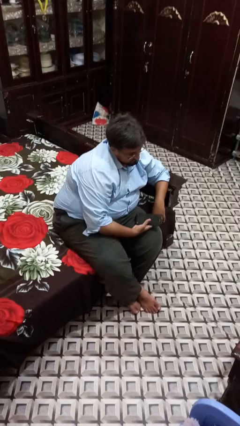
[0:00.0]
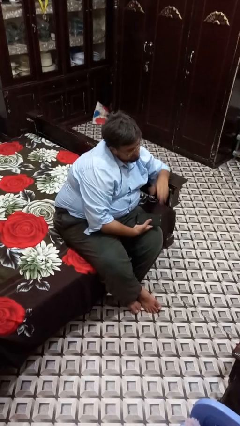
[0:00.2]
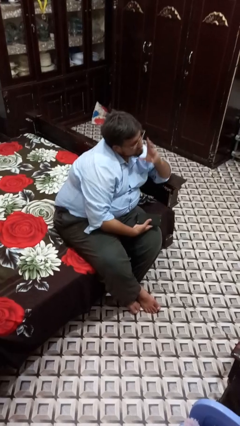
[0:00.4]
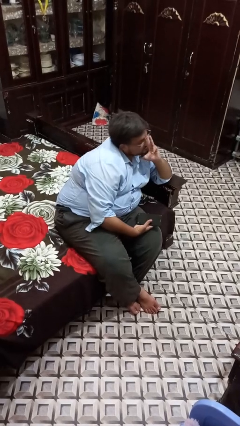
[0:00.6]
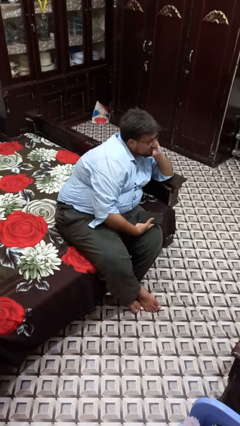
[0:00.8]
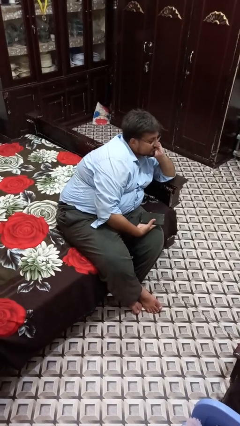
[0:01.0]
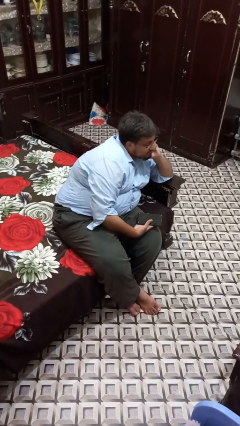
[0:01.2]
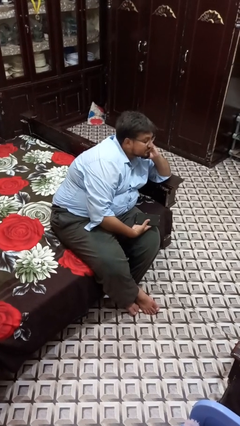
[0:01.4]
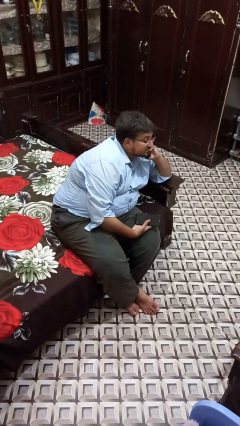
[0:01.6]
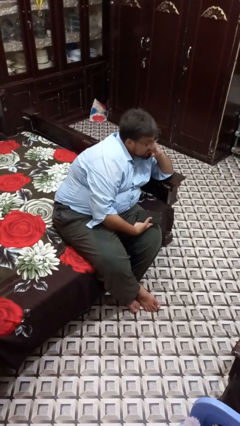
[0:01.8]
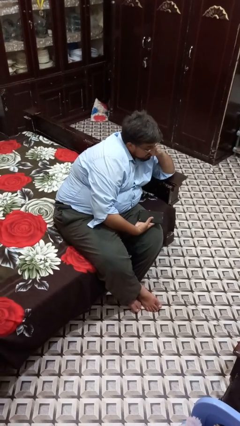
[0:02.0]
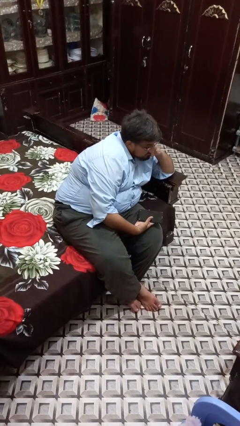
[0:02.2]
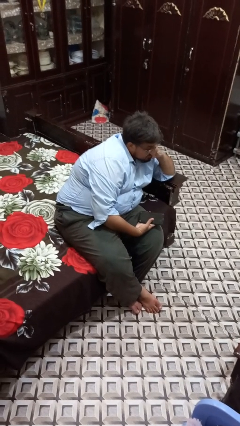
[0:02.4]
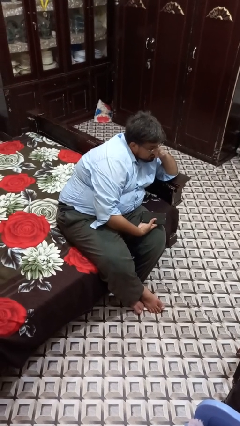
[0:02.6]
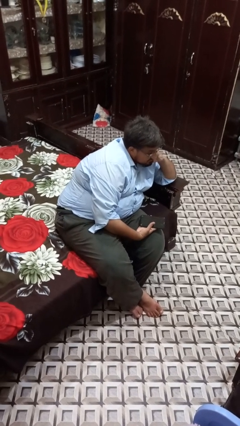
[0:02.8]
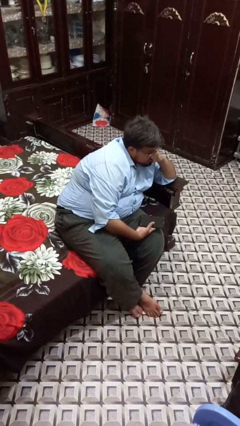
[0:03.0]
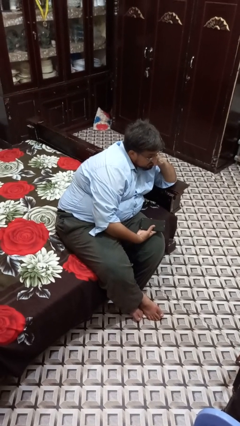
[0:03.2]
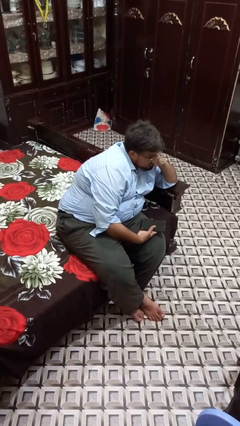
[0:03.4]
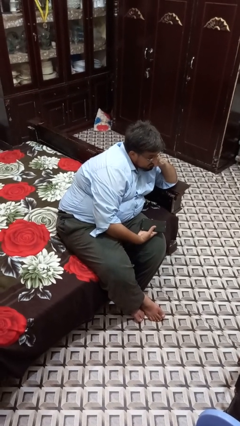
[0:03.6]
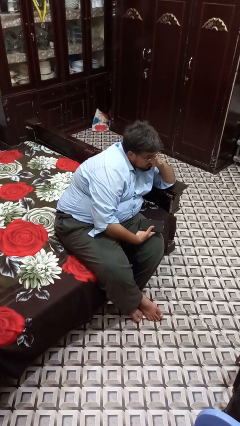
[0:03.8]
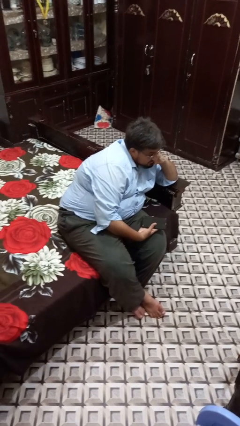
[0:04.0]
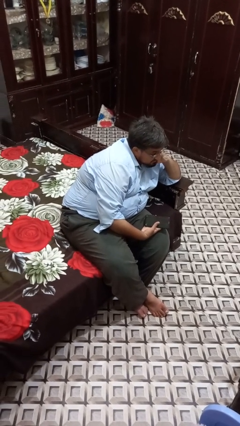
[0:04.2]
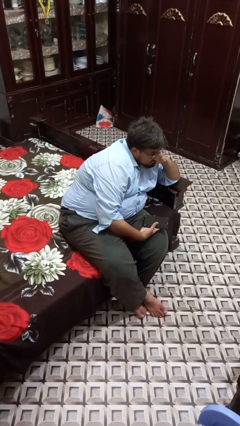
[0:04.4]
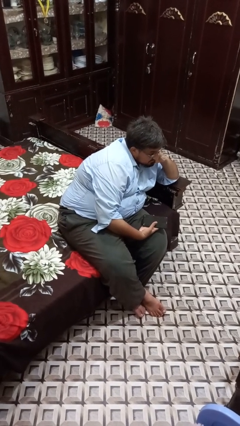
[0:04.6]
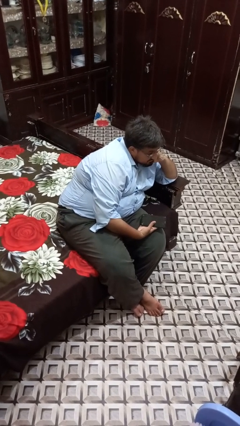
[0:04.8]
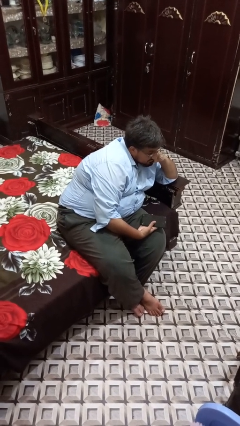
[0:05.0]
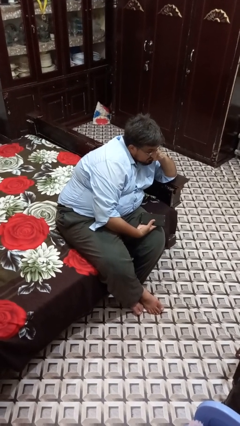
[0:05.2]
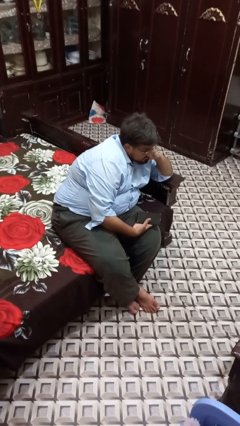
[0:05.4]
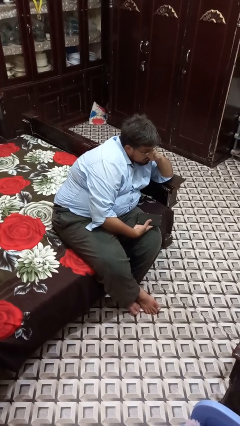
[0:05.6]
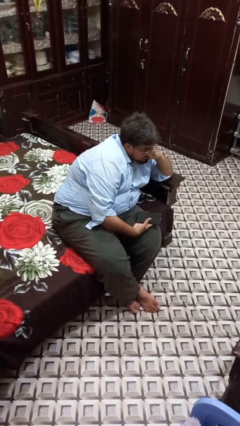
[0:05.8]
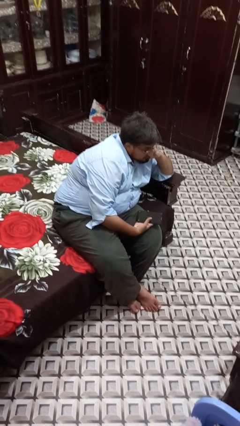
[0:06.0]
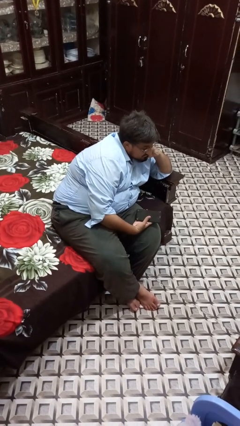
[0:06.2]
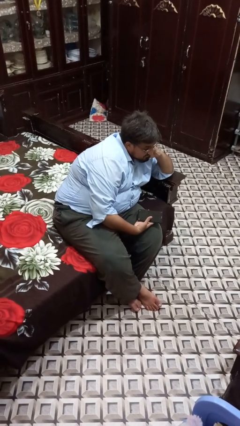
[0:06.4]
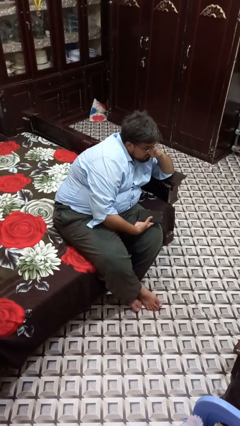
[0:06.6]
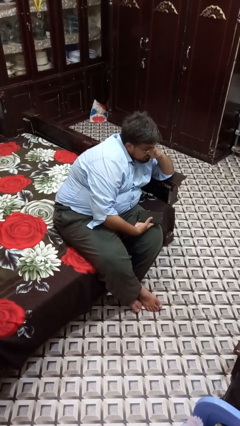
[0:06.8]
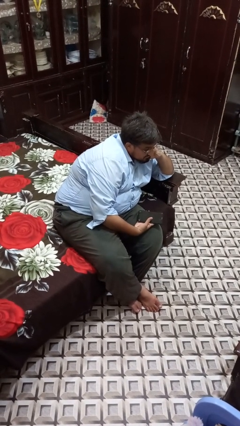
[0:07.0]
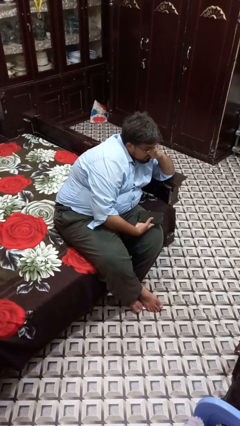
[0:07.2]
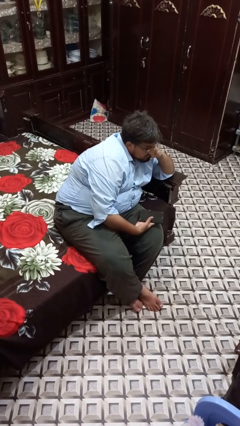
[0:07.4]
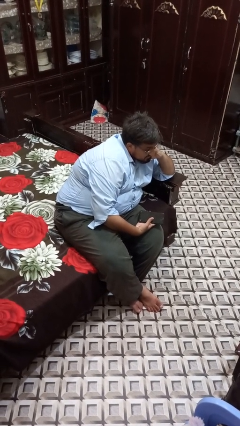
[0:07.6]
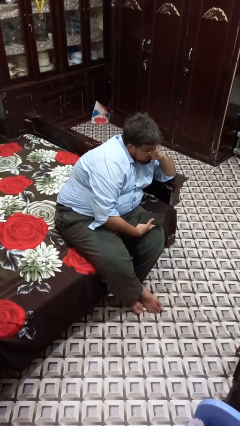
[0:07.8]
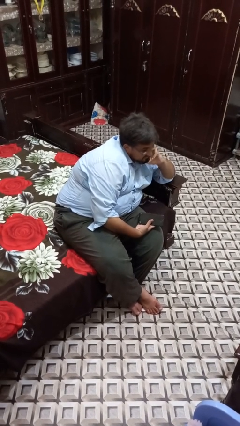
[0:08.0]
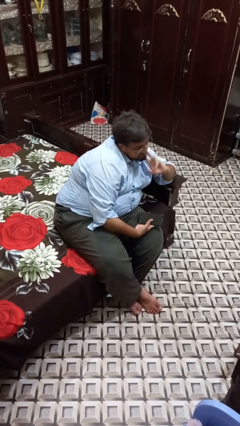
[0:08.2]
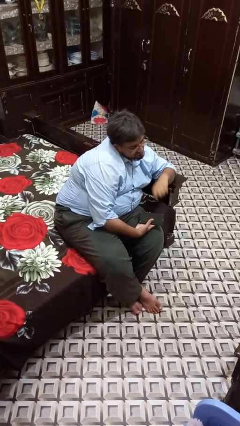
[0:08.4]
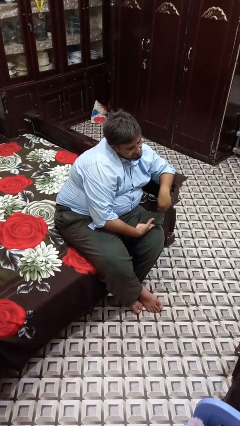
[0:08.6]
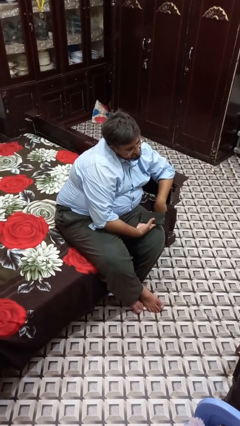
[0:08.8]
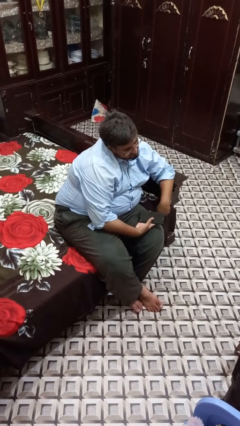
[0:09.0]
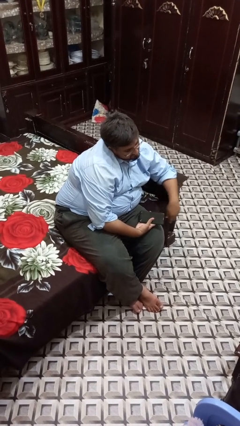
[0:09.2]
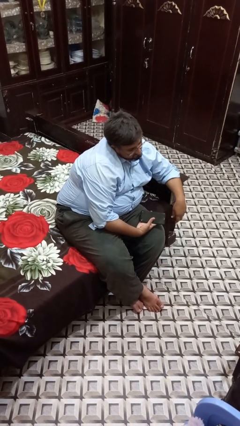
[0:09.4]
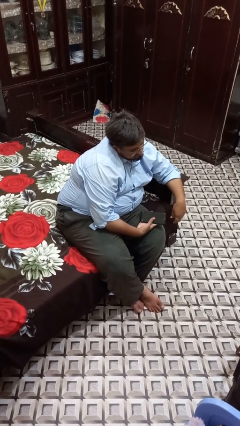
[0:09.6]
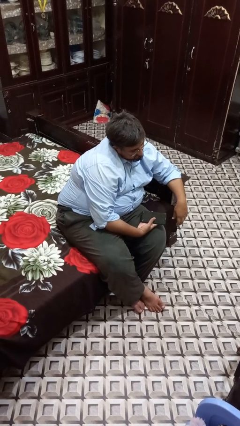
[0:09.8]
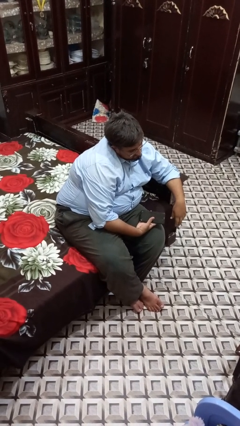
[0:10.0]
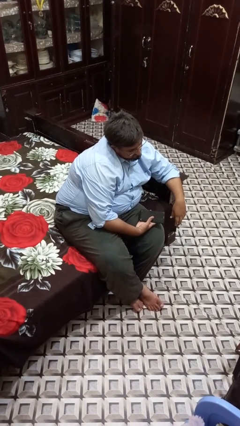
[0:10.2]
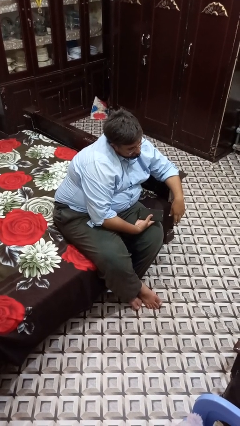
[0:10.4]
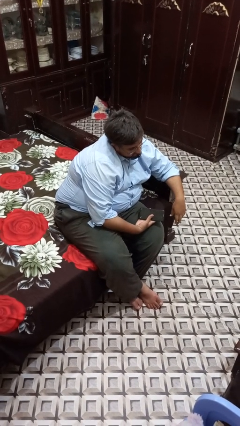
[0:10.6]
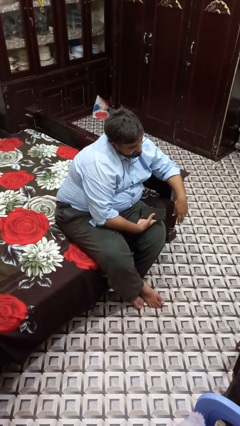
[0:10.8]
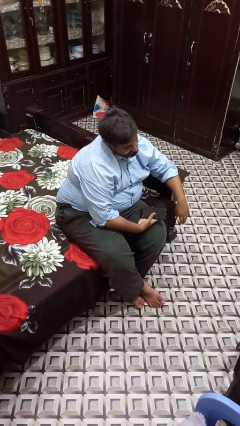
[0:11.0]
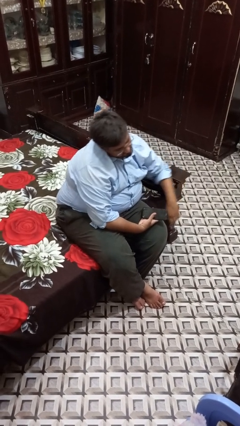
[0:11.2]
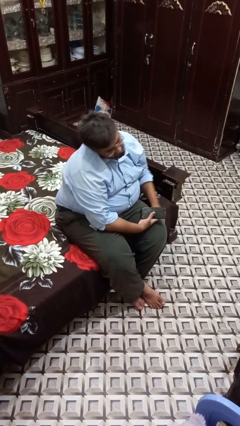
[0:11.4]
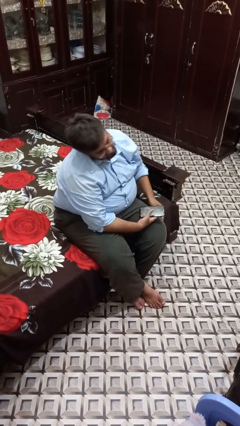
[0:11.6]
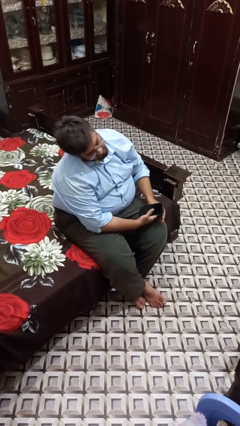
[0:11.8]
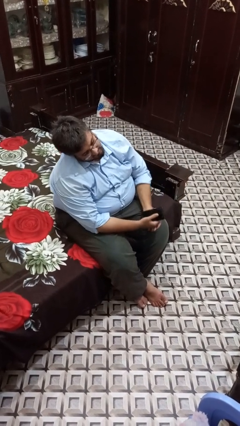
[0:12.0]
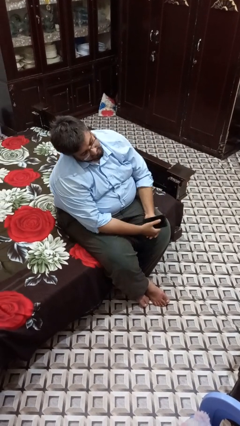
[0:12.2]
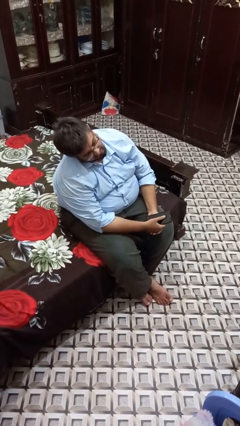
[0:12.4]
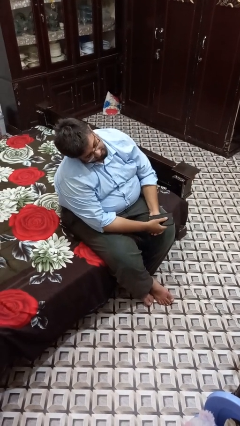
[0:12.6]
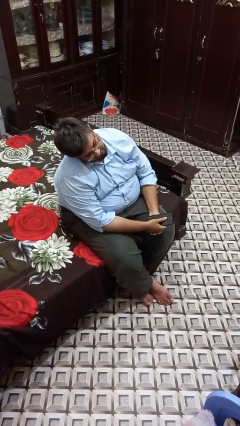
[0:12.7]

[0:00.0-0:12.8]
person strokes chin

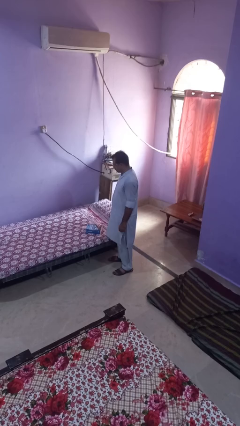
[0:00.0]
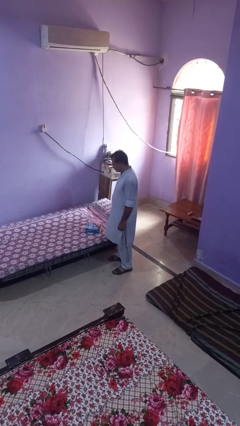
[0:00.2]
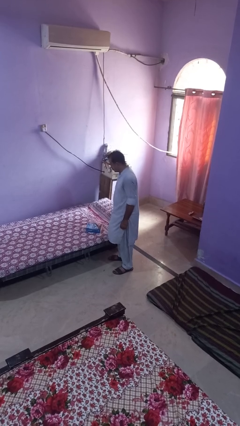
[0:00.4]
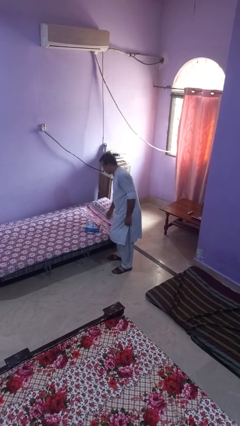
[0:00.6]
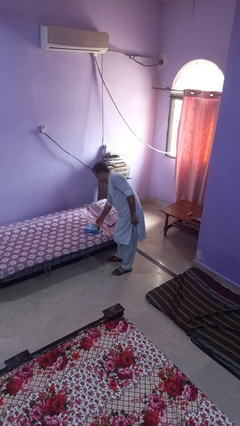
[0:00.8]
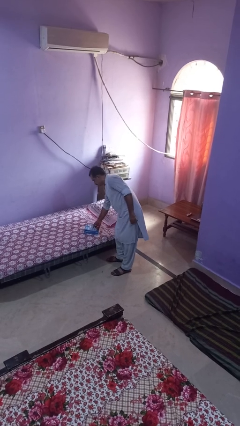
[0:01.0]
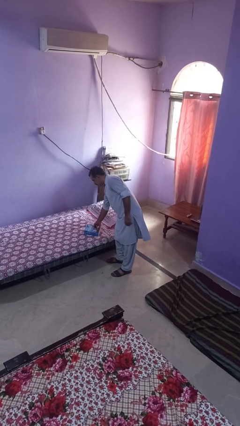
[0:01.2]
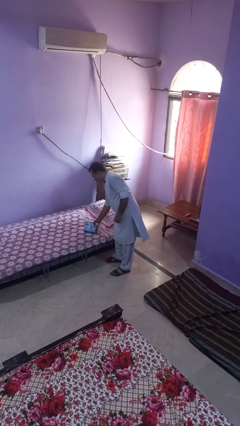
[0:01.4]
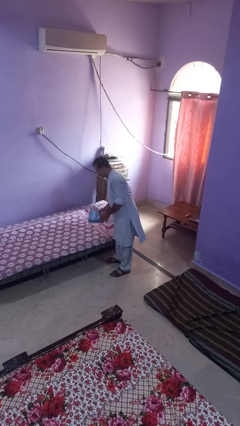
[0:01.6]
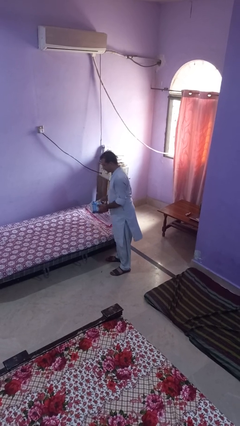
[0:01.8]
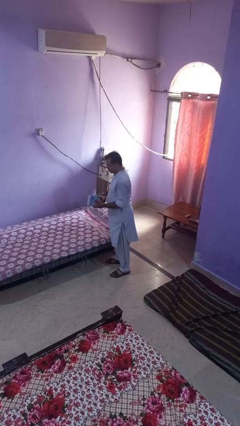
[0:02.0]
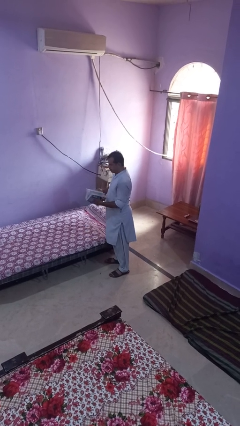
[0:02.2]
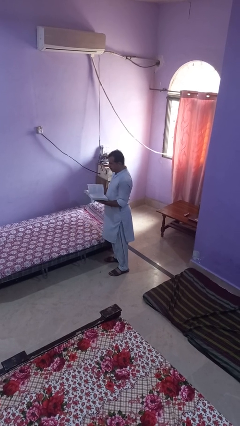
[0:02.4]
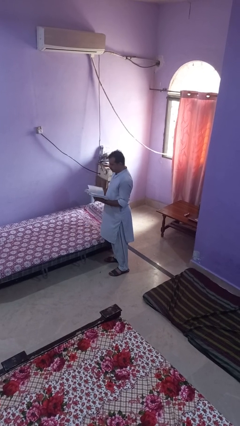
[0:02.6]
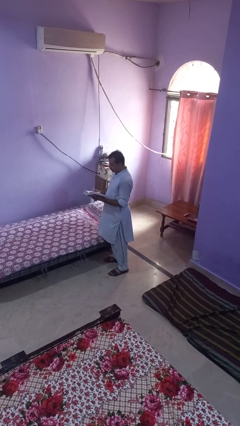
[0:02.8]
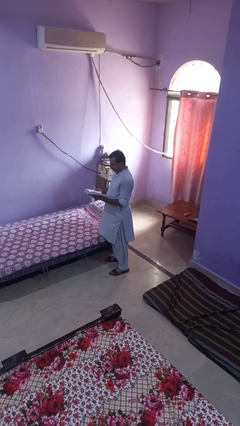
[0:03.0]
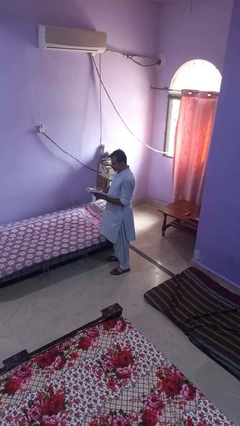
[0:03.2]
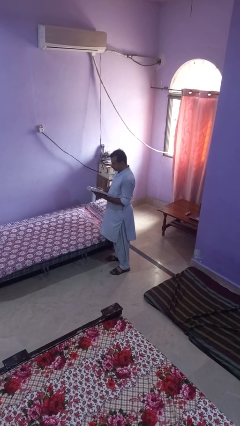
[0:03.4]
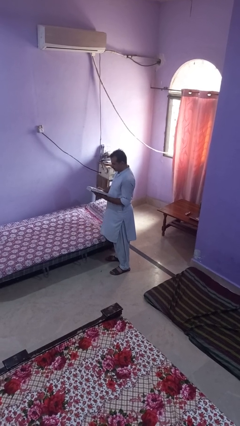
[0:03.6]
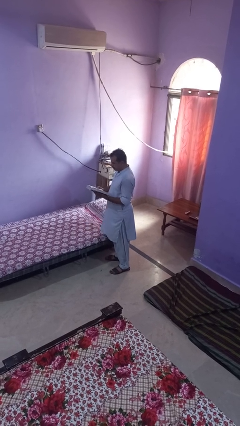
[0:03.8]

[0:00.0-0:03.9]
person picks up object from bed

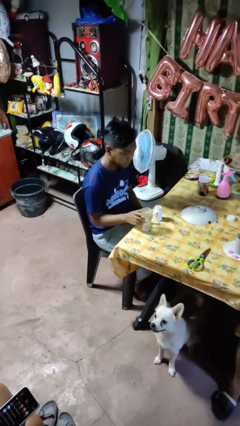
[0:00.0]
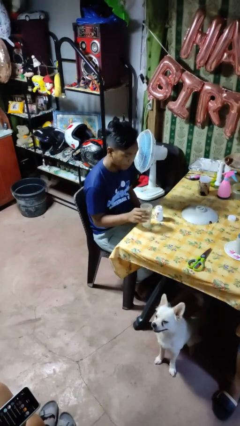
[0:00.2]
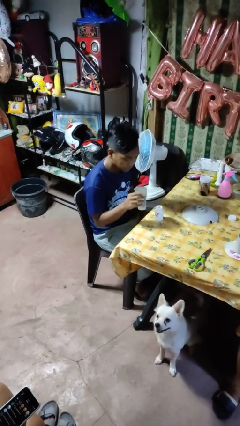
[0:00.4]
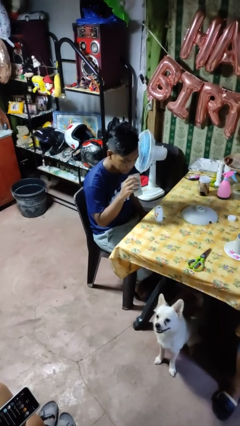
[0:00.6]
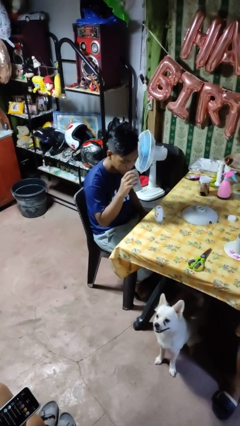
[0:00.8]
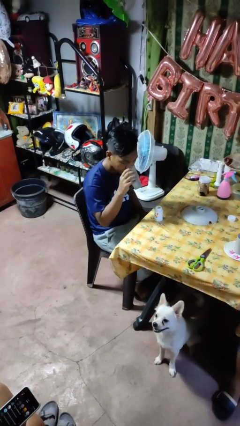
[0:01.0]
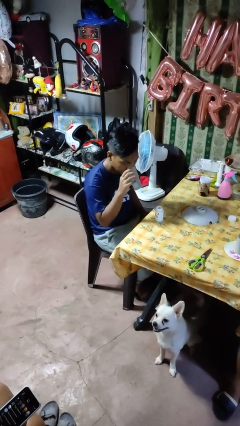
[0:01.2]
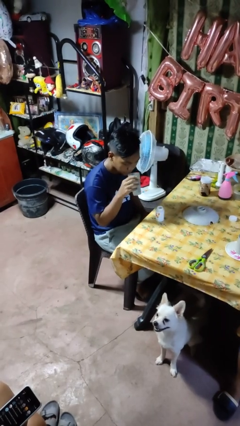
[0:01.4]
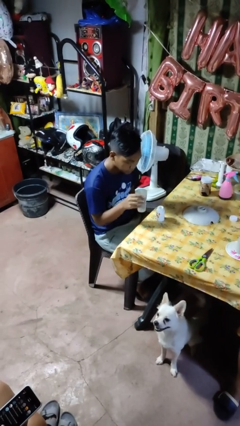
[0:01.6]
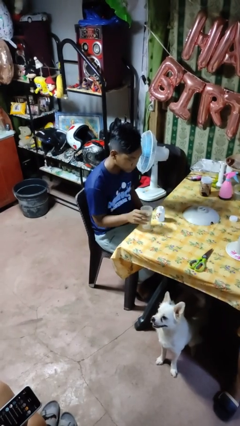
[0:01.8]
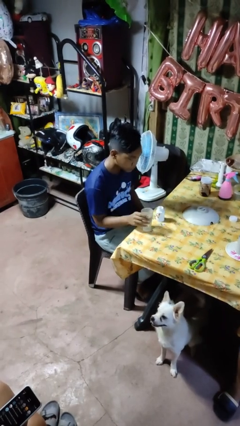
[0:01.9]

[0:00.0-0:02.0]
person drinks from cup
